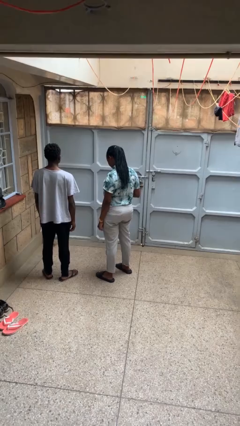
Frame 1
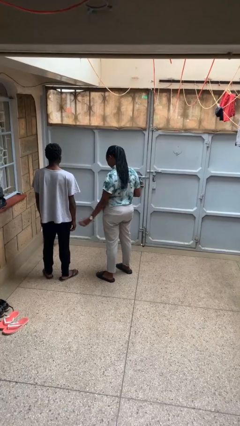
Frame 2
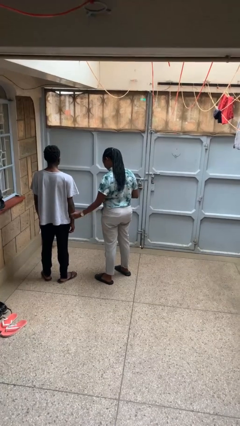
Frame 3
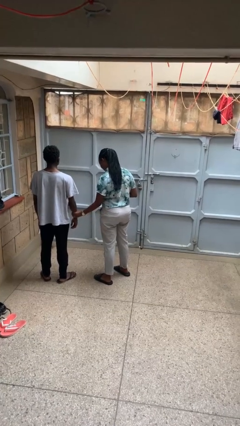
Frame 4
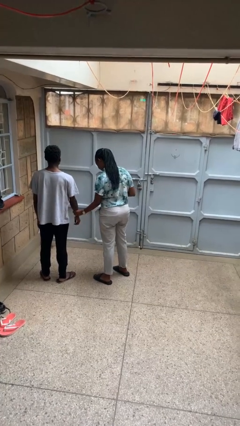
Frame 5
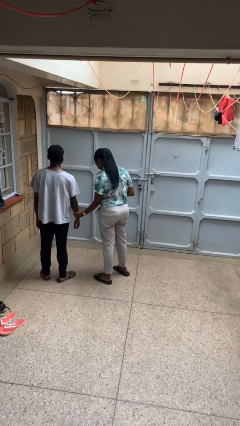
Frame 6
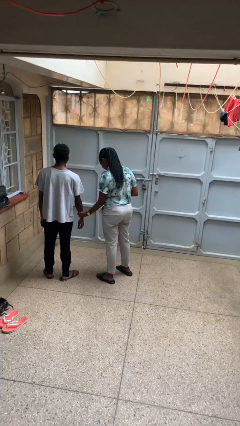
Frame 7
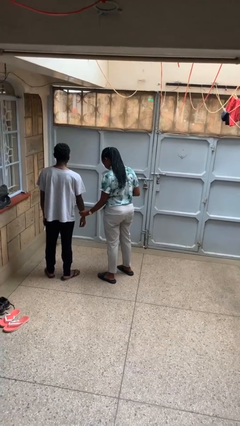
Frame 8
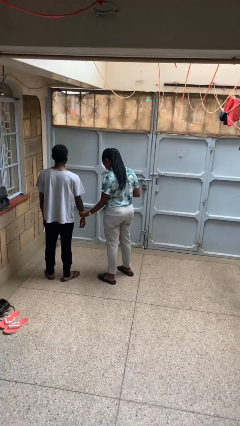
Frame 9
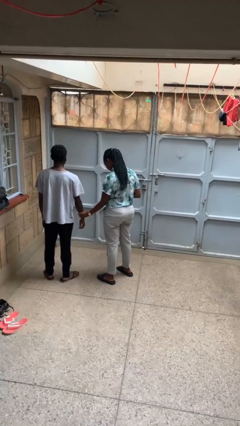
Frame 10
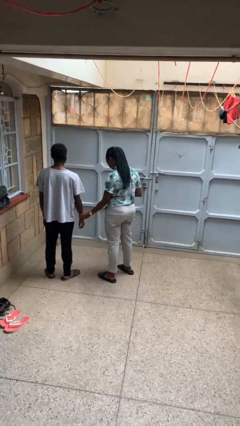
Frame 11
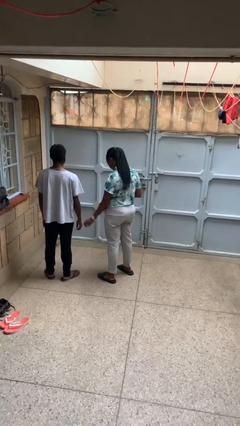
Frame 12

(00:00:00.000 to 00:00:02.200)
person grabs person by forearm

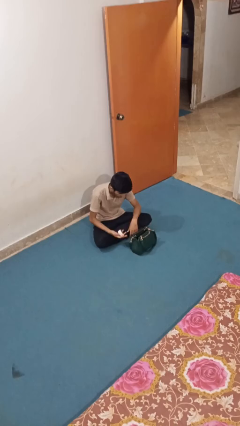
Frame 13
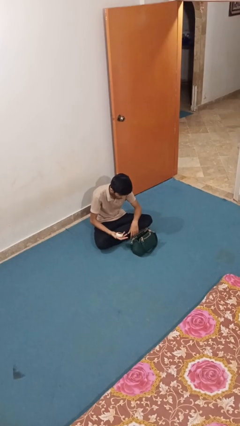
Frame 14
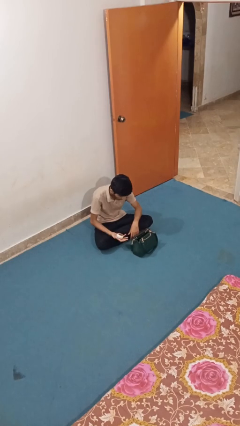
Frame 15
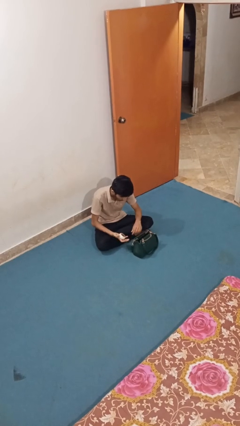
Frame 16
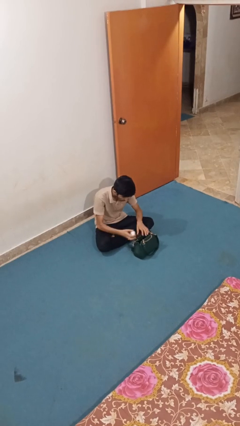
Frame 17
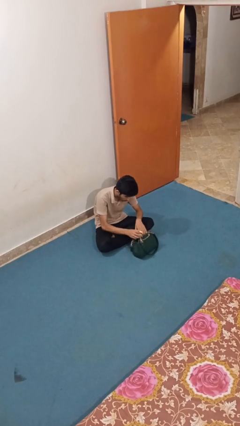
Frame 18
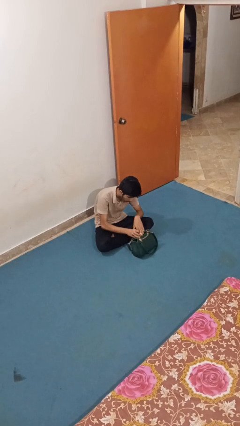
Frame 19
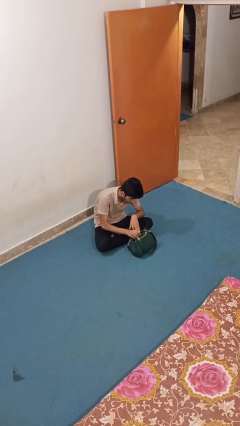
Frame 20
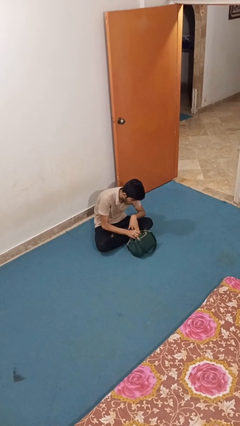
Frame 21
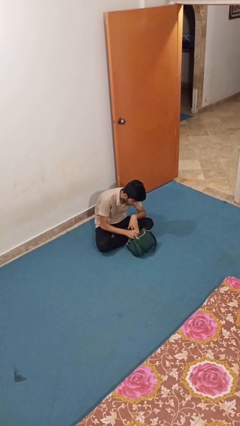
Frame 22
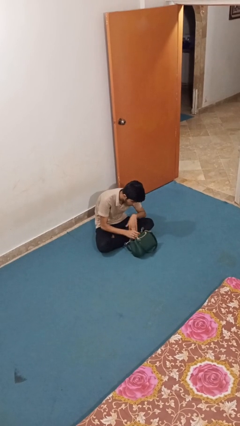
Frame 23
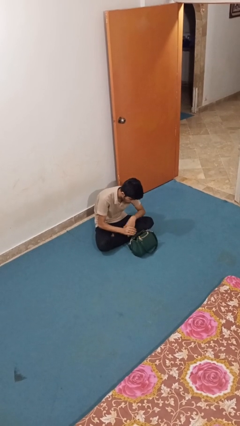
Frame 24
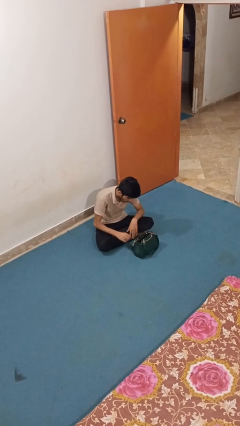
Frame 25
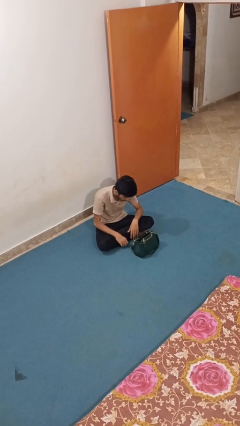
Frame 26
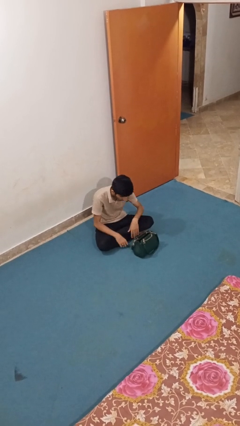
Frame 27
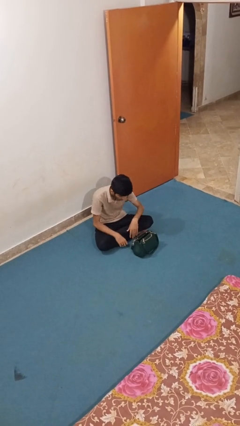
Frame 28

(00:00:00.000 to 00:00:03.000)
person puts object into purse

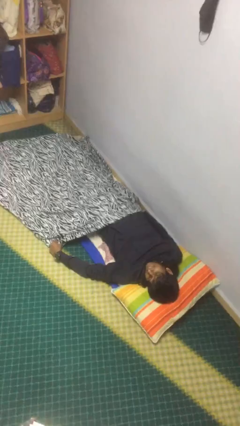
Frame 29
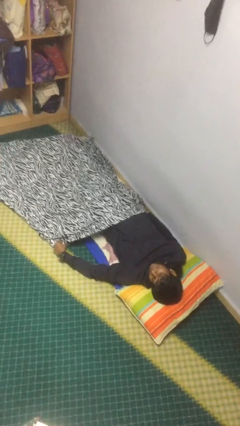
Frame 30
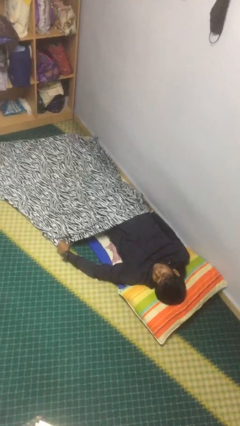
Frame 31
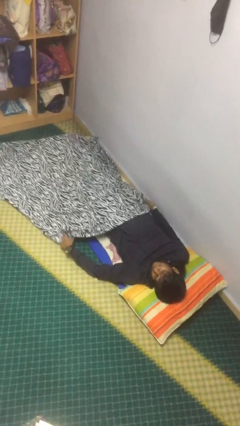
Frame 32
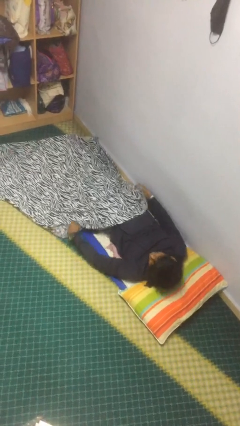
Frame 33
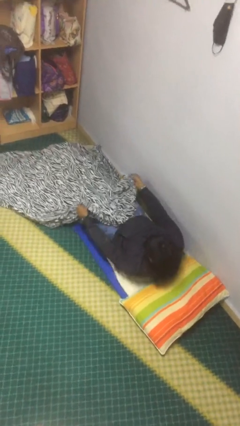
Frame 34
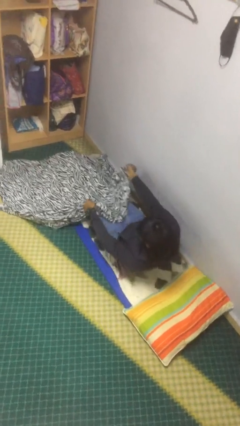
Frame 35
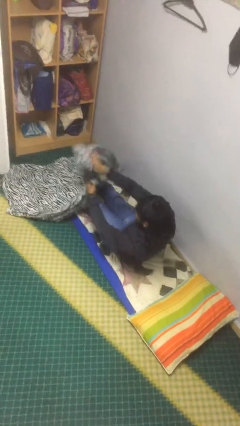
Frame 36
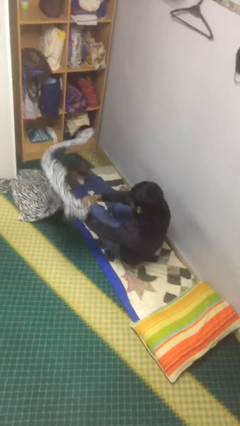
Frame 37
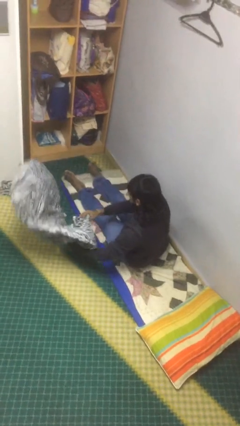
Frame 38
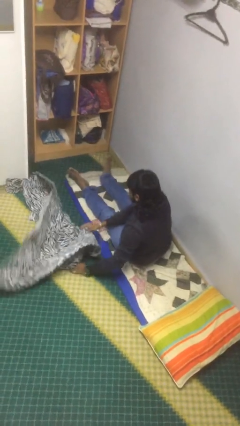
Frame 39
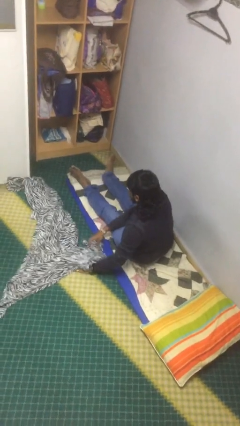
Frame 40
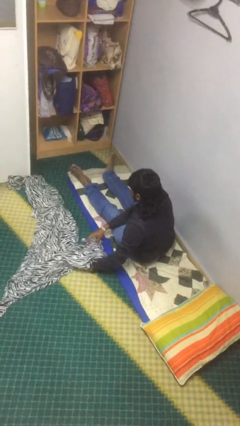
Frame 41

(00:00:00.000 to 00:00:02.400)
person uncovers with blanket

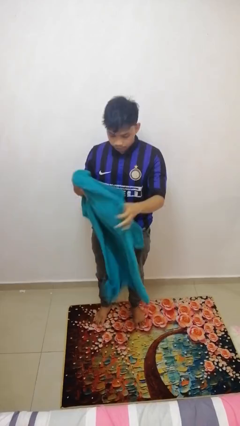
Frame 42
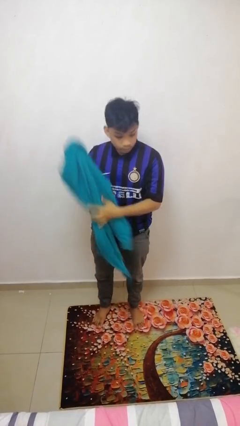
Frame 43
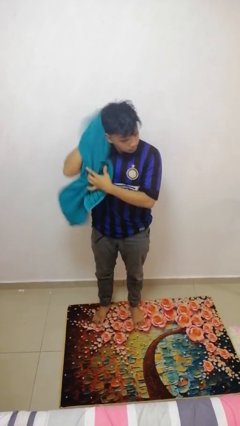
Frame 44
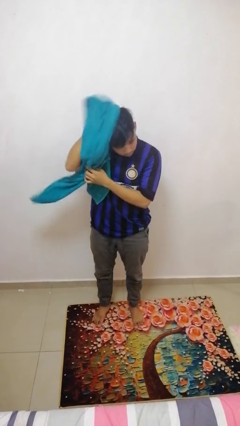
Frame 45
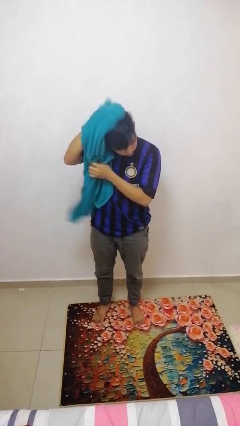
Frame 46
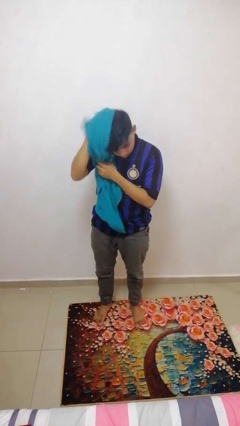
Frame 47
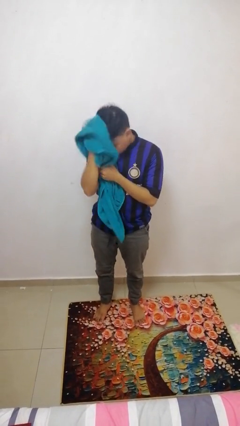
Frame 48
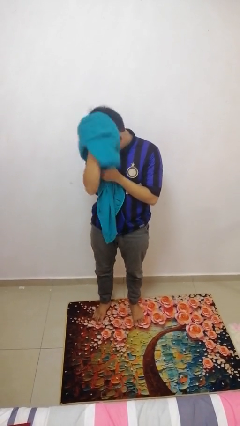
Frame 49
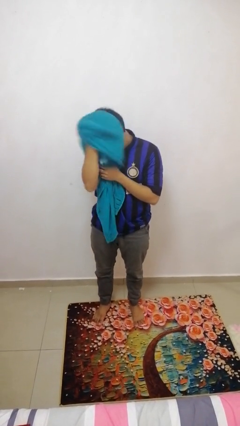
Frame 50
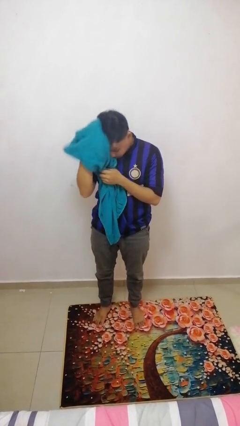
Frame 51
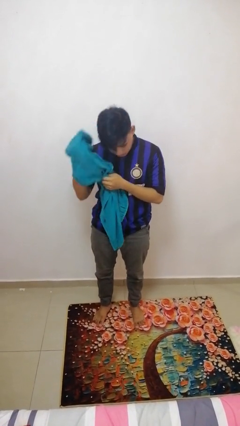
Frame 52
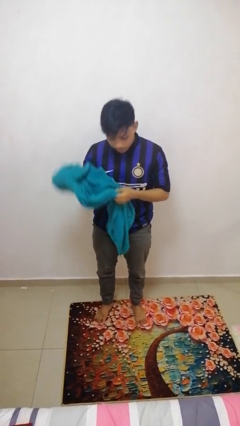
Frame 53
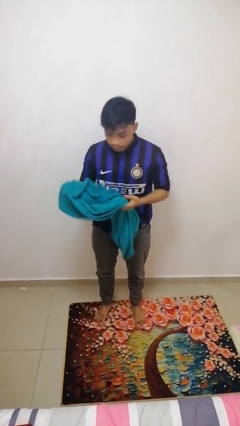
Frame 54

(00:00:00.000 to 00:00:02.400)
person dries hair with towel

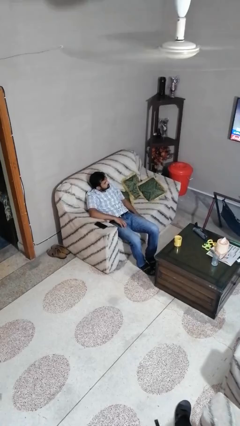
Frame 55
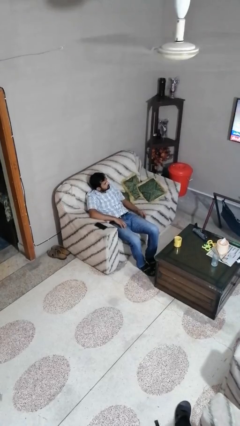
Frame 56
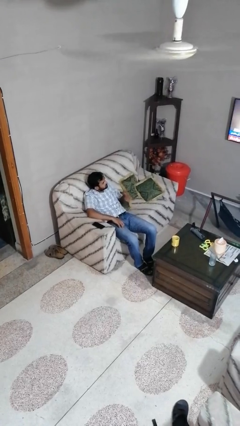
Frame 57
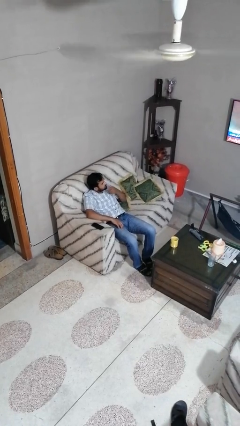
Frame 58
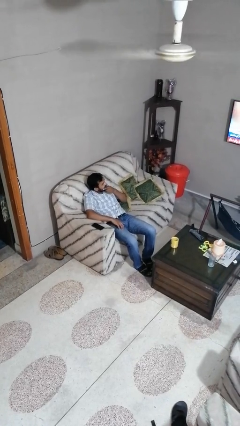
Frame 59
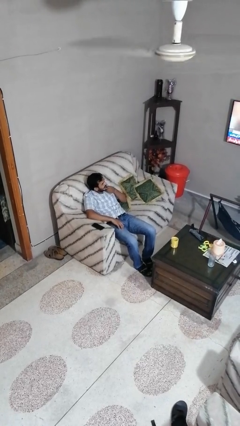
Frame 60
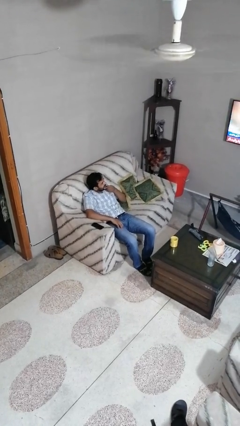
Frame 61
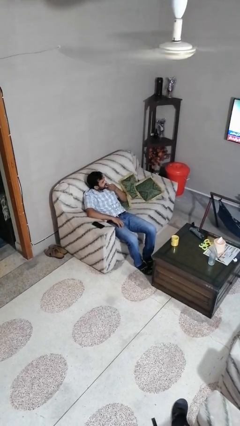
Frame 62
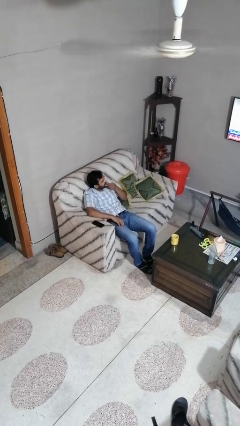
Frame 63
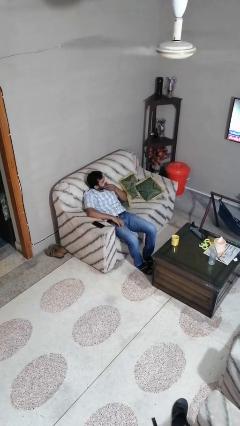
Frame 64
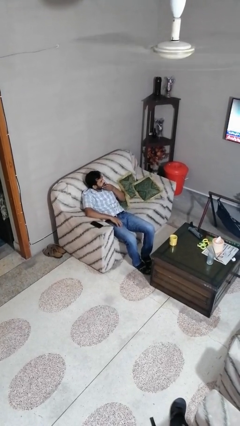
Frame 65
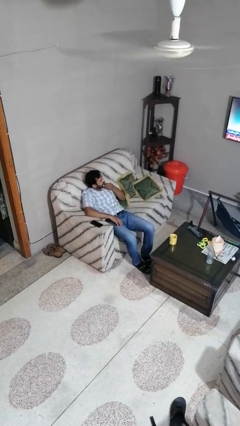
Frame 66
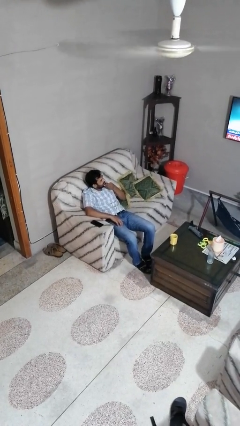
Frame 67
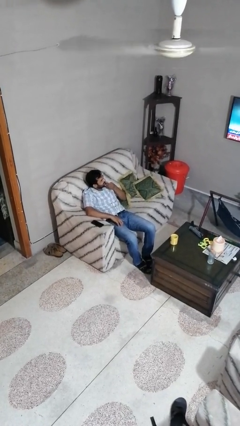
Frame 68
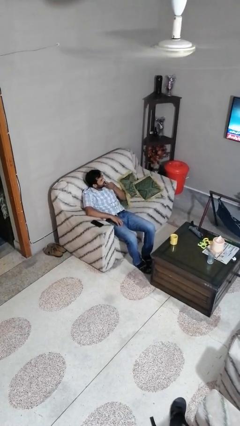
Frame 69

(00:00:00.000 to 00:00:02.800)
person strokes chin

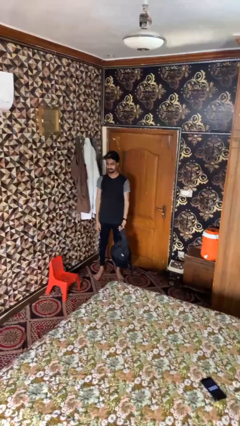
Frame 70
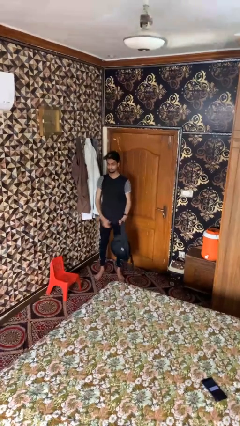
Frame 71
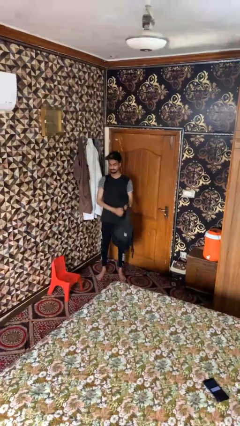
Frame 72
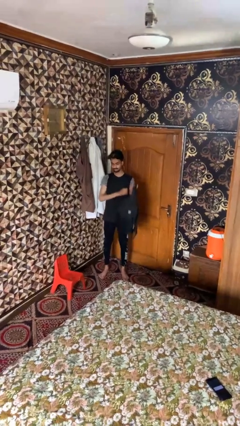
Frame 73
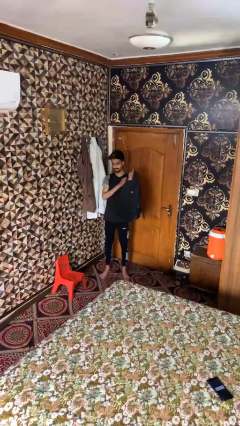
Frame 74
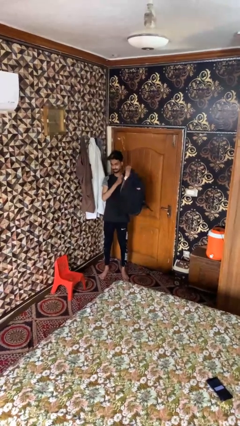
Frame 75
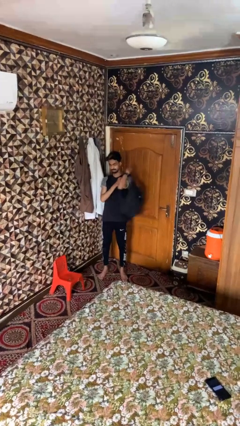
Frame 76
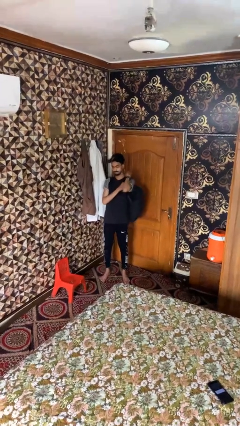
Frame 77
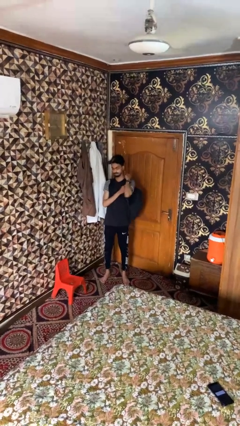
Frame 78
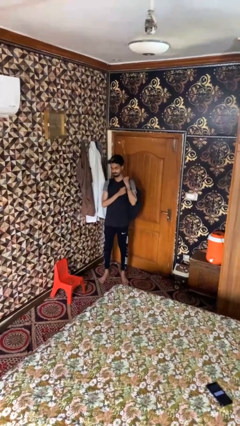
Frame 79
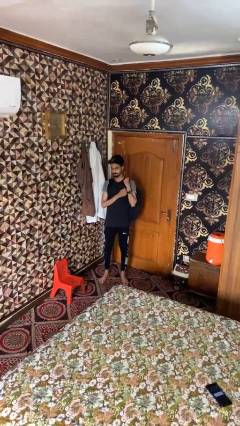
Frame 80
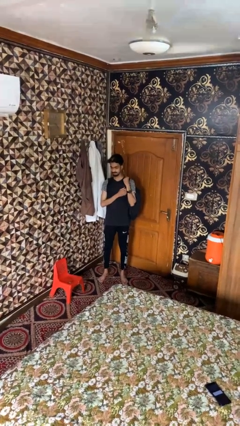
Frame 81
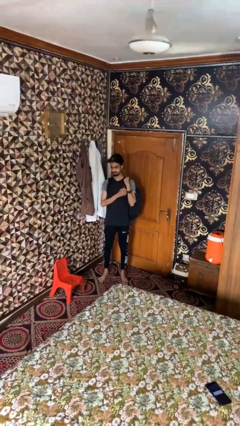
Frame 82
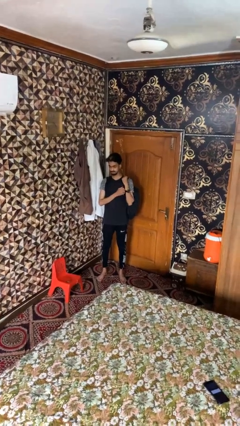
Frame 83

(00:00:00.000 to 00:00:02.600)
person puts on backpack

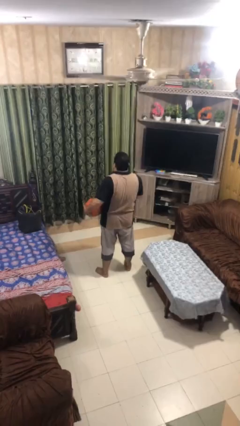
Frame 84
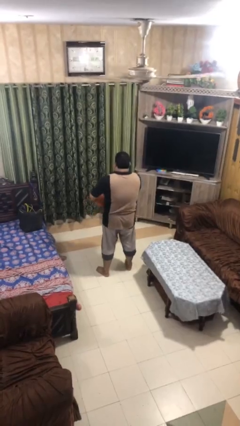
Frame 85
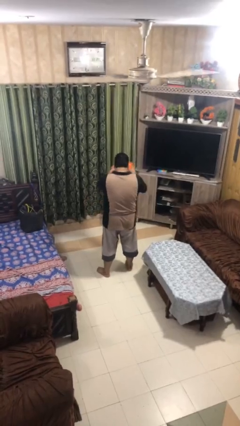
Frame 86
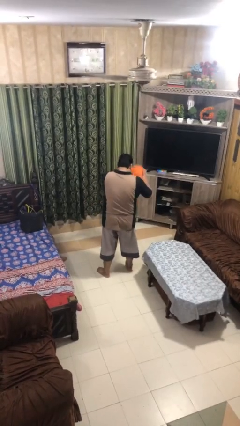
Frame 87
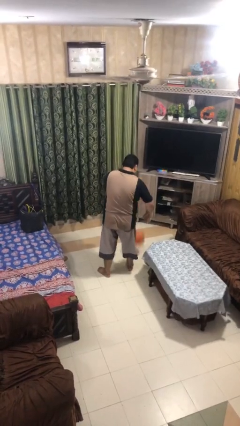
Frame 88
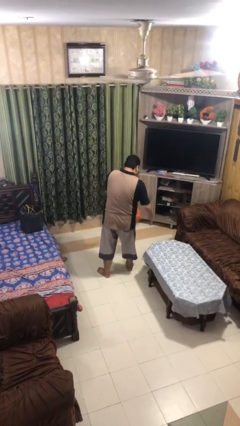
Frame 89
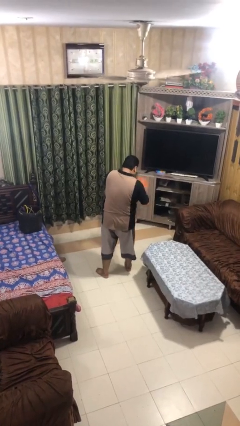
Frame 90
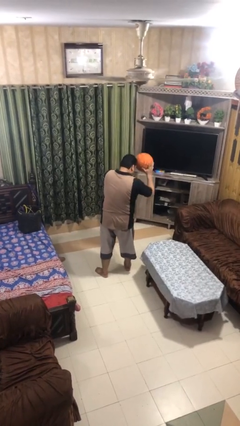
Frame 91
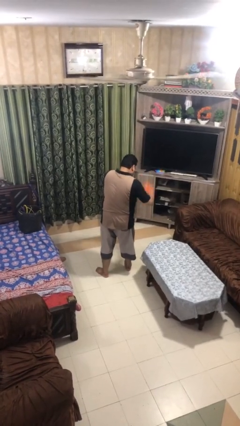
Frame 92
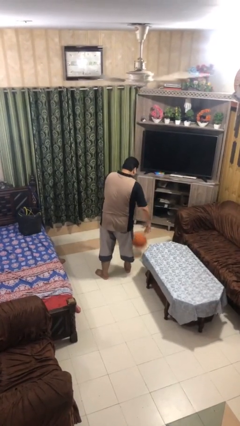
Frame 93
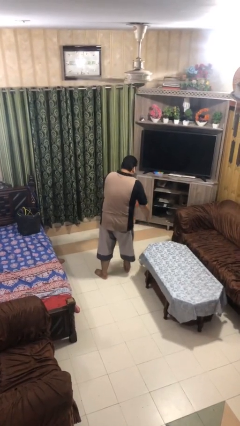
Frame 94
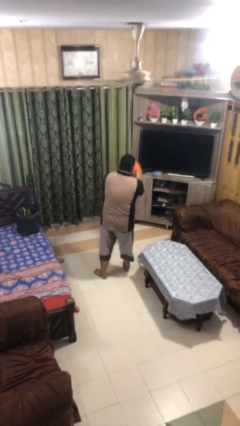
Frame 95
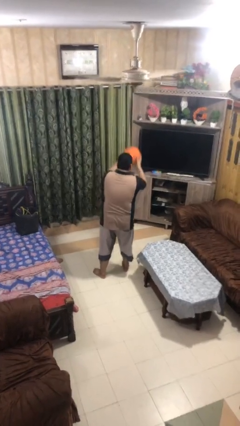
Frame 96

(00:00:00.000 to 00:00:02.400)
person bounces ball on floor
